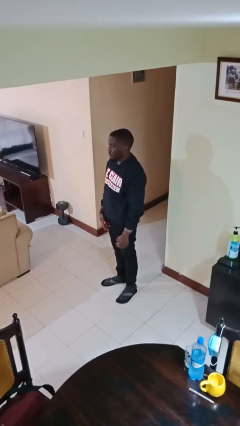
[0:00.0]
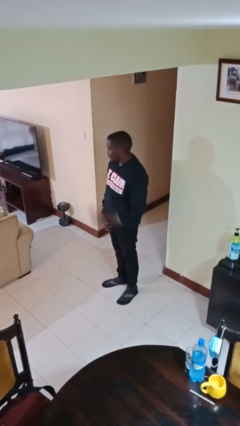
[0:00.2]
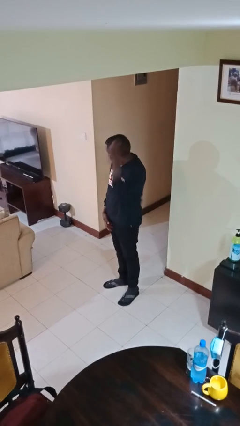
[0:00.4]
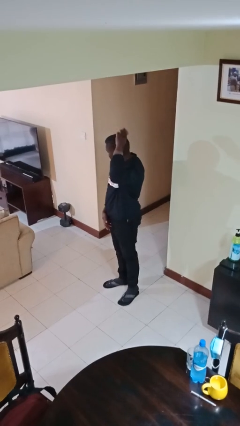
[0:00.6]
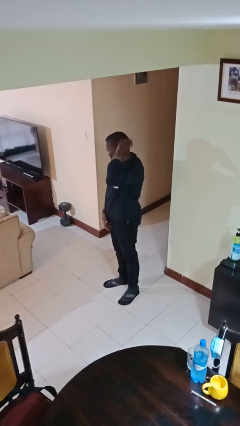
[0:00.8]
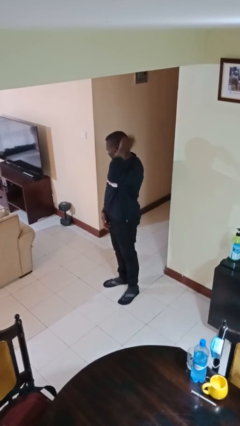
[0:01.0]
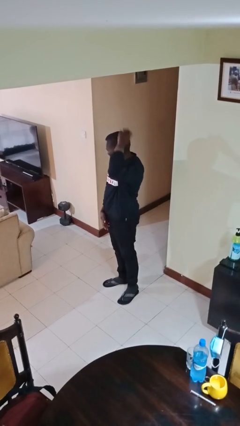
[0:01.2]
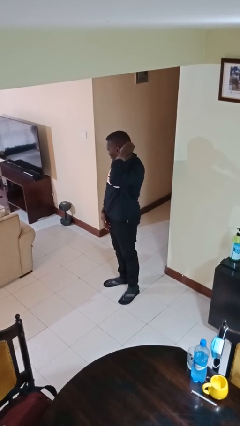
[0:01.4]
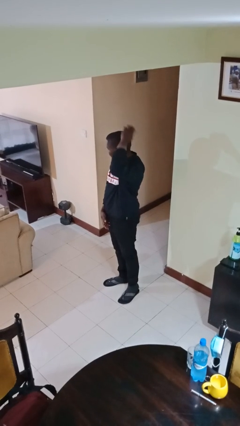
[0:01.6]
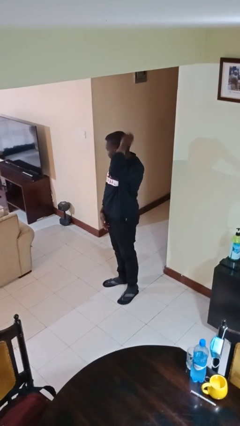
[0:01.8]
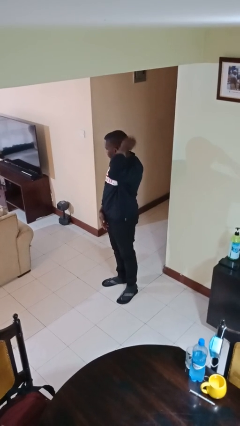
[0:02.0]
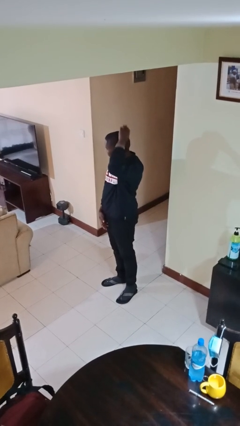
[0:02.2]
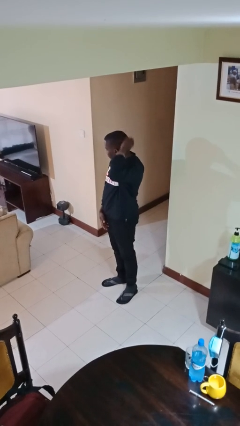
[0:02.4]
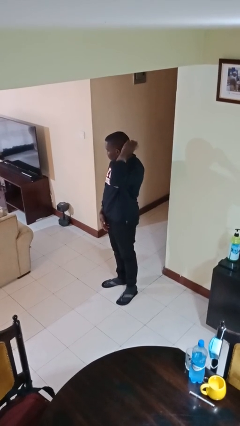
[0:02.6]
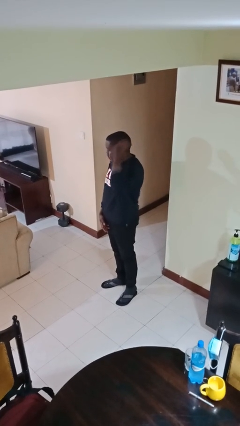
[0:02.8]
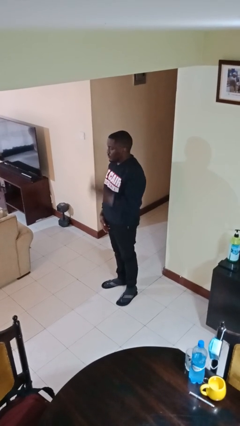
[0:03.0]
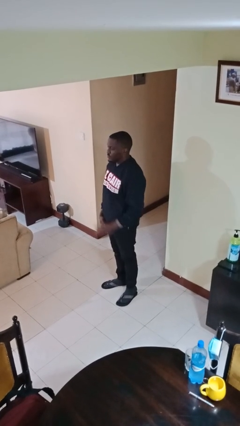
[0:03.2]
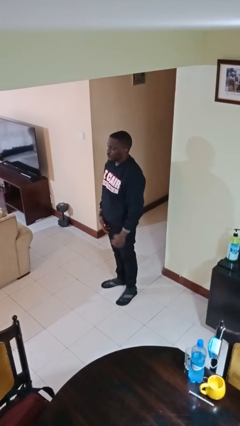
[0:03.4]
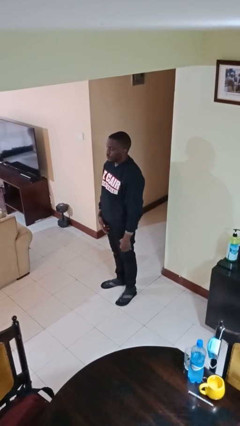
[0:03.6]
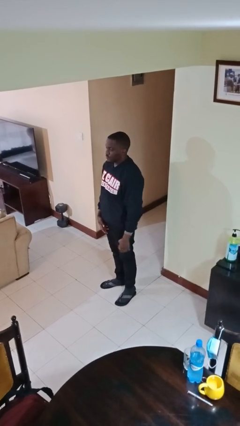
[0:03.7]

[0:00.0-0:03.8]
person brushes hair

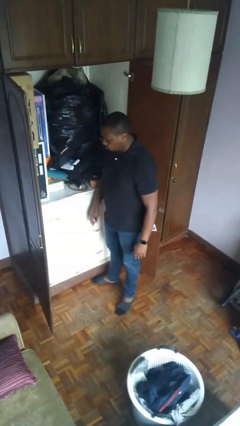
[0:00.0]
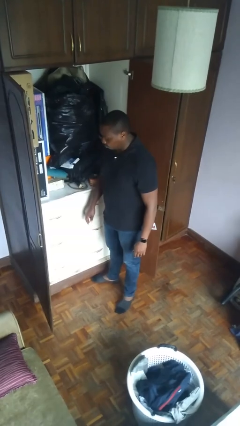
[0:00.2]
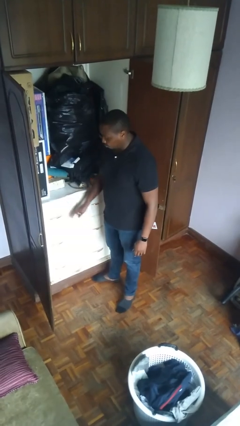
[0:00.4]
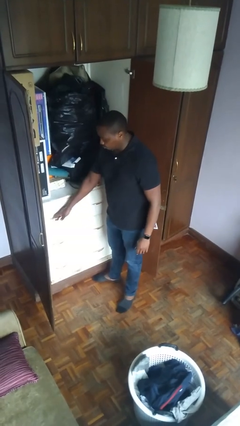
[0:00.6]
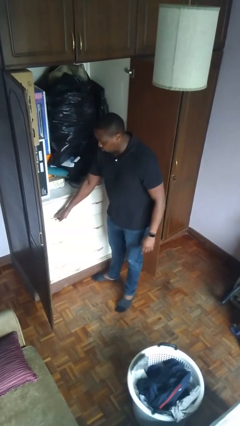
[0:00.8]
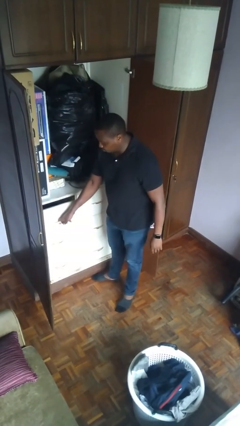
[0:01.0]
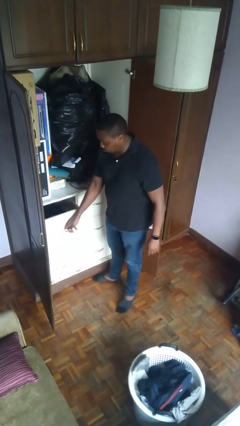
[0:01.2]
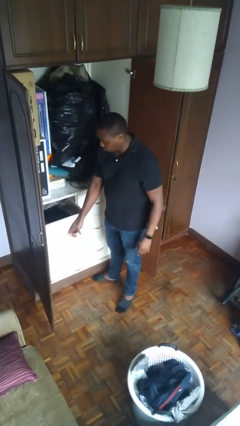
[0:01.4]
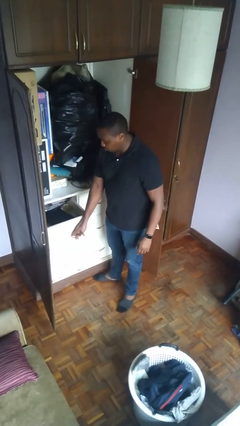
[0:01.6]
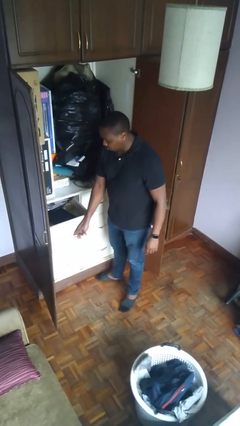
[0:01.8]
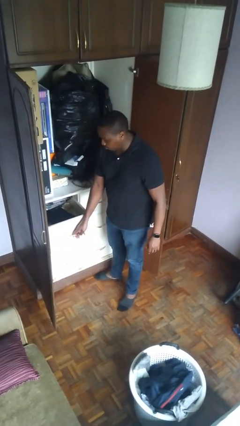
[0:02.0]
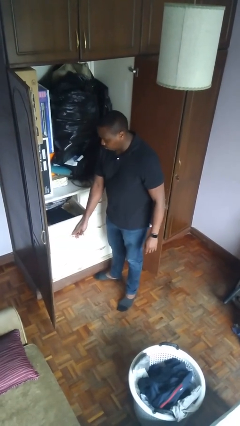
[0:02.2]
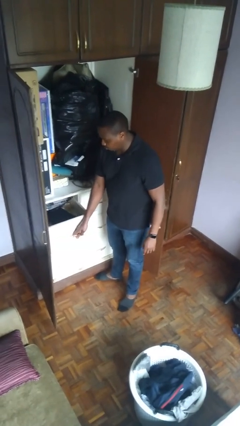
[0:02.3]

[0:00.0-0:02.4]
person opens dresser drawer

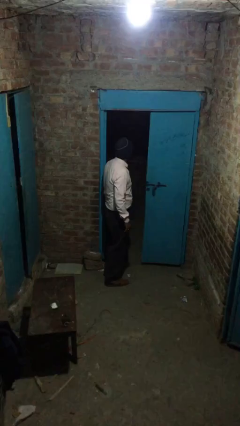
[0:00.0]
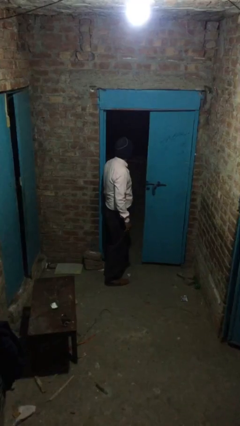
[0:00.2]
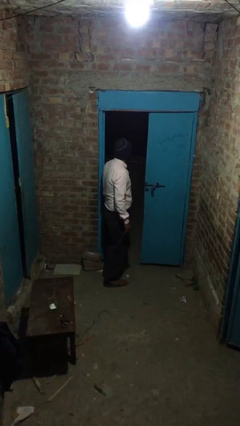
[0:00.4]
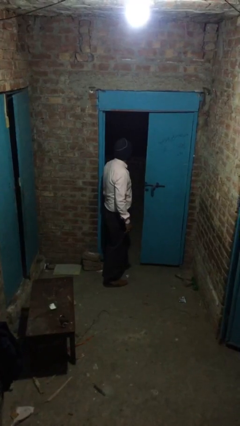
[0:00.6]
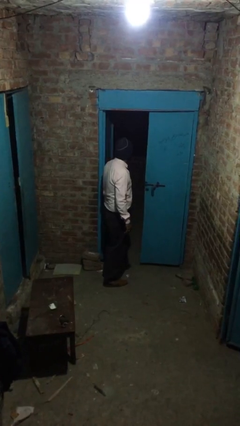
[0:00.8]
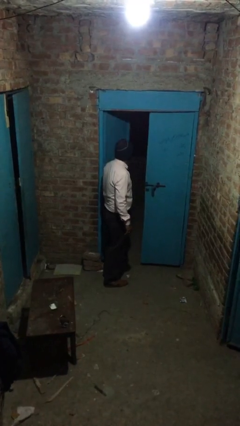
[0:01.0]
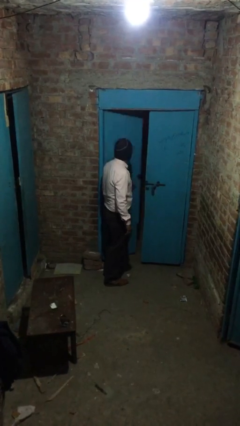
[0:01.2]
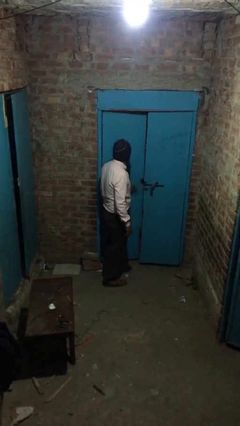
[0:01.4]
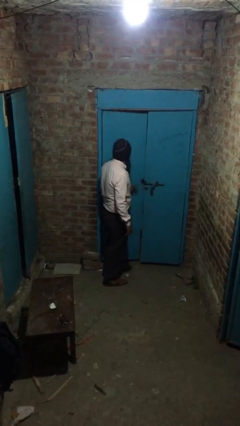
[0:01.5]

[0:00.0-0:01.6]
person closes facility door

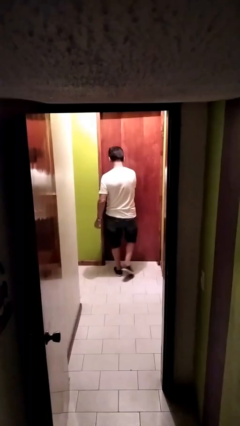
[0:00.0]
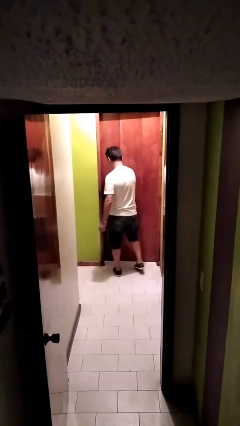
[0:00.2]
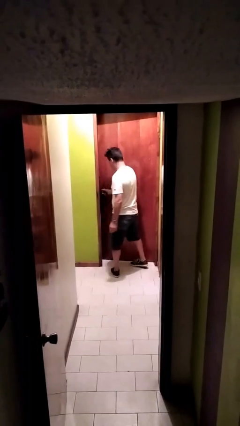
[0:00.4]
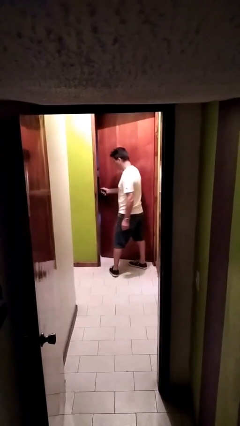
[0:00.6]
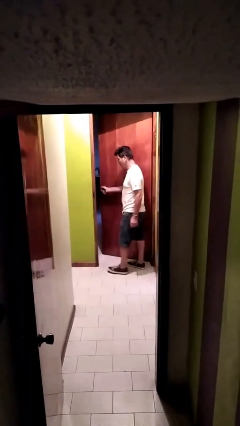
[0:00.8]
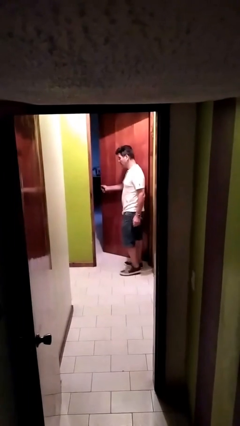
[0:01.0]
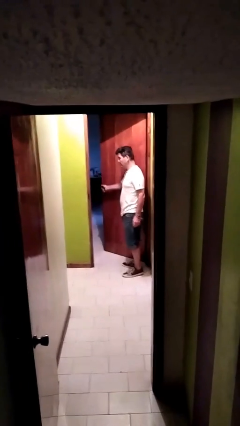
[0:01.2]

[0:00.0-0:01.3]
person opens facility door

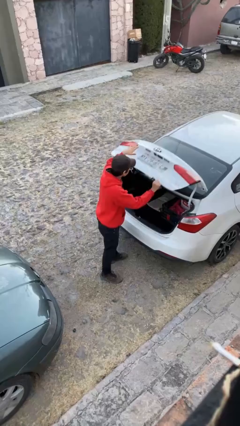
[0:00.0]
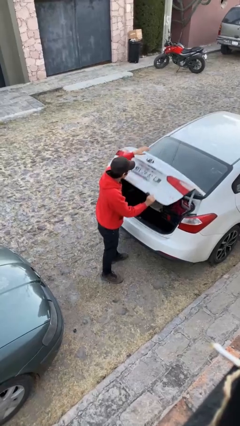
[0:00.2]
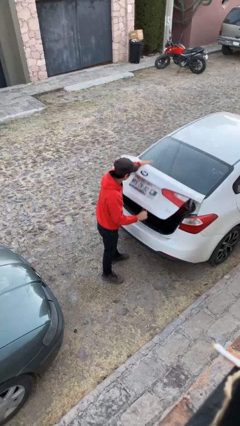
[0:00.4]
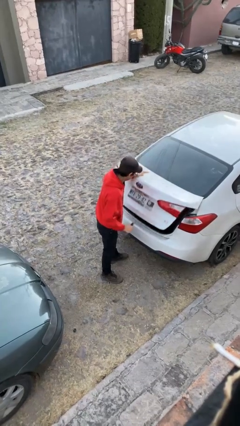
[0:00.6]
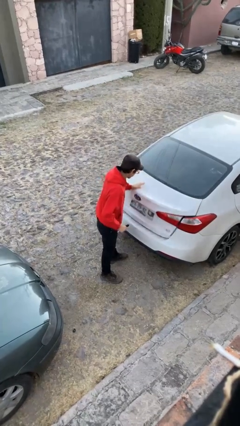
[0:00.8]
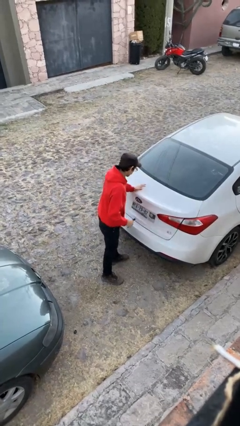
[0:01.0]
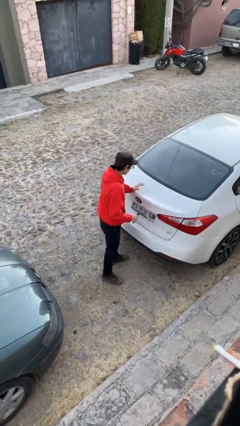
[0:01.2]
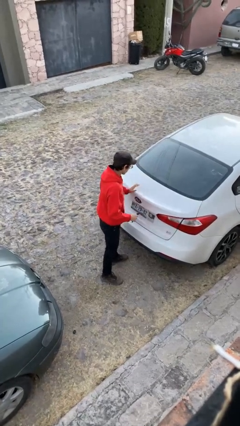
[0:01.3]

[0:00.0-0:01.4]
person closes car trunk

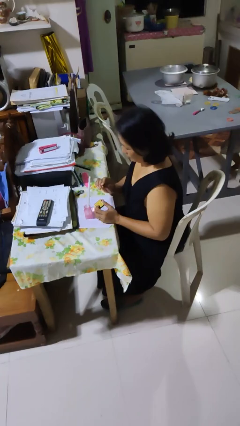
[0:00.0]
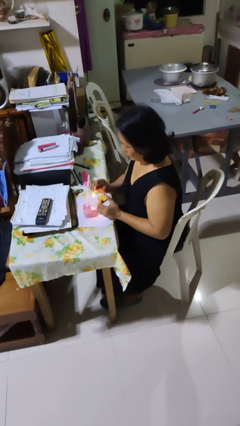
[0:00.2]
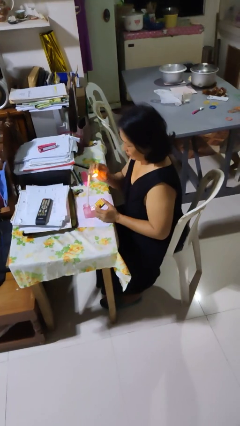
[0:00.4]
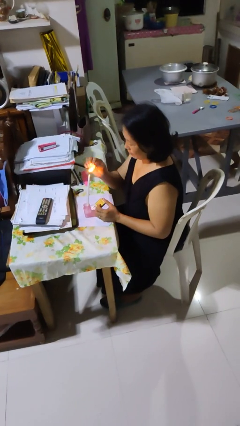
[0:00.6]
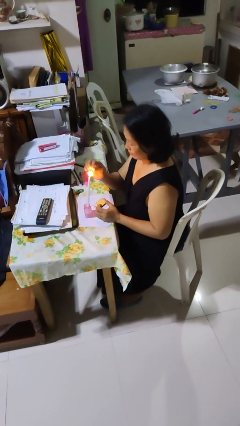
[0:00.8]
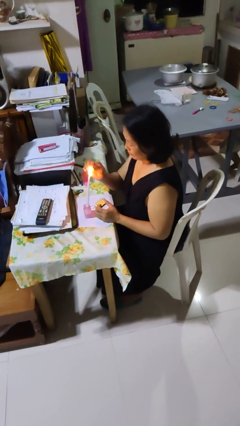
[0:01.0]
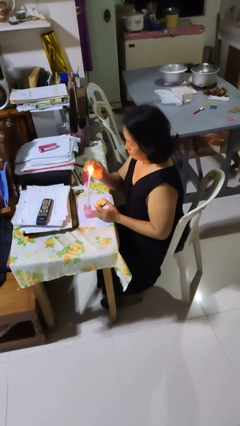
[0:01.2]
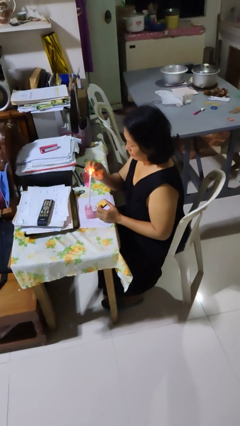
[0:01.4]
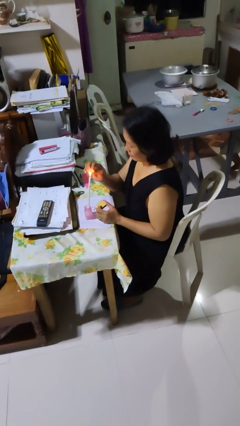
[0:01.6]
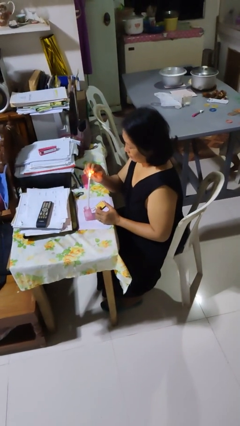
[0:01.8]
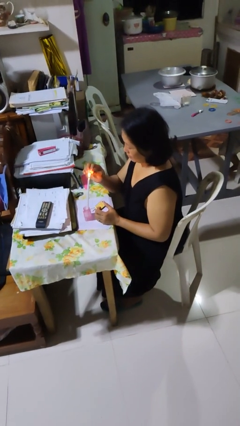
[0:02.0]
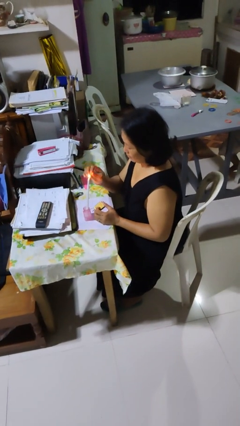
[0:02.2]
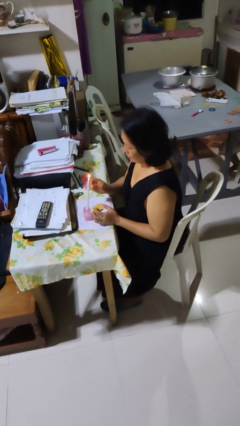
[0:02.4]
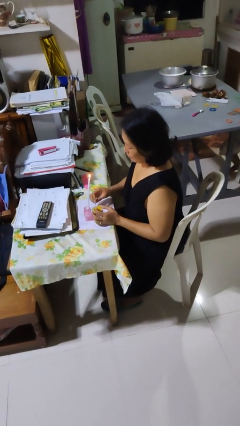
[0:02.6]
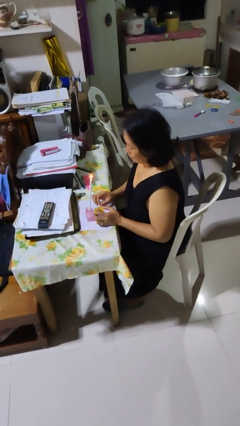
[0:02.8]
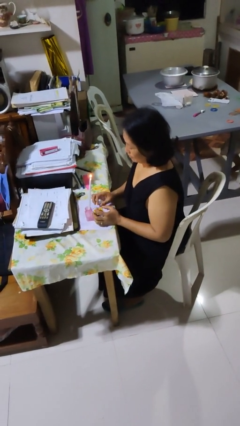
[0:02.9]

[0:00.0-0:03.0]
person lights candle

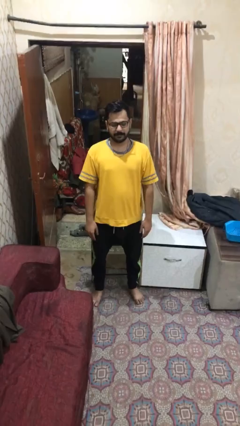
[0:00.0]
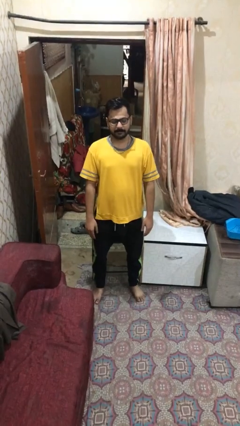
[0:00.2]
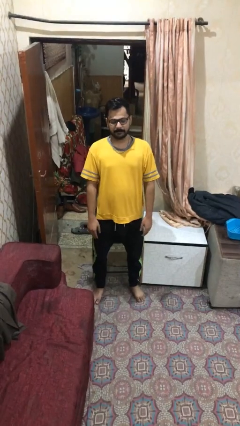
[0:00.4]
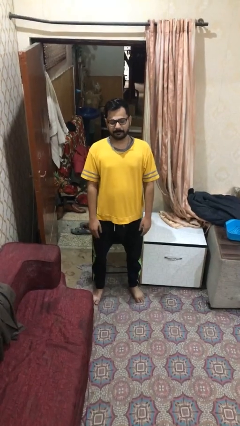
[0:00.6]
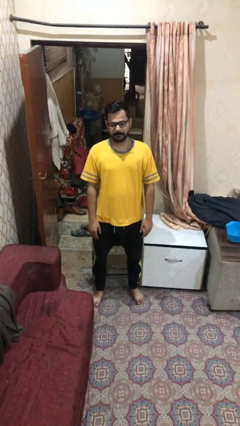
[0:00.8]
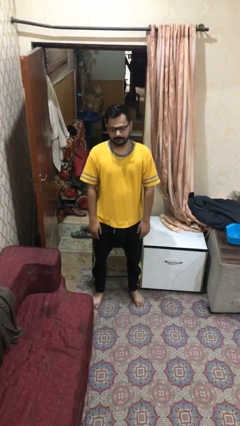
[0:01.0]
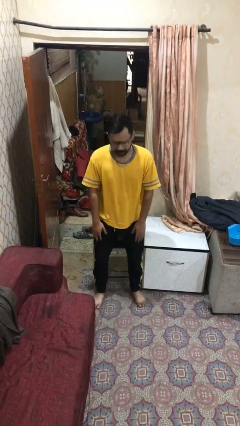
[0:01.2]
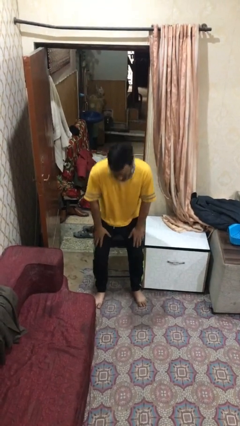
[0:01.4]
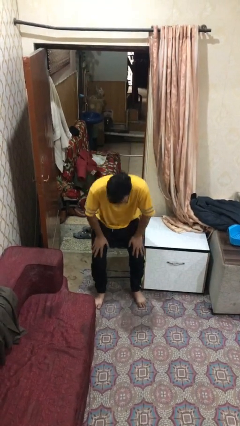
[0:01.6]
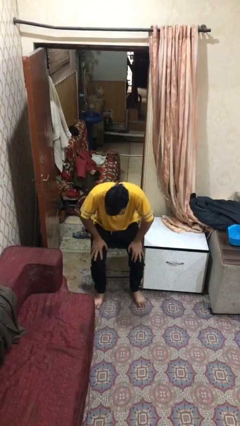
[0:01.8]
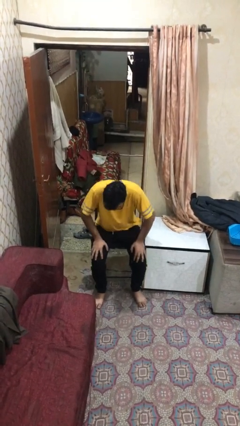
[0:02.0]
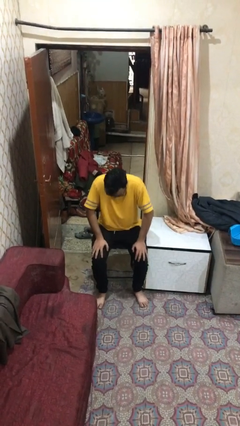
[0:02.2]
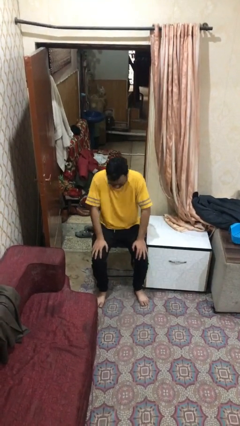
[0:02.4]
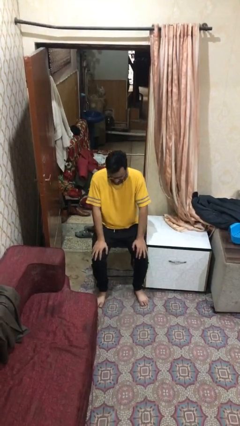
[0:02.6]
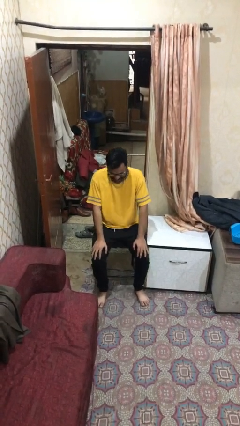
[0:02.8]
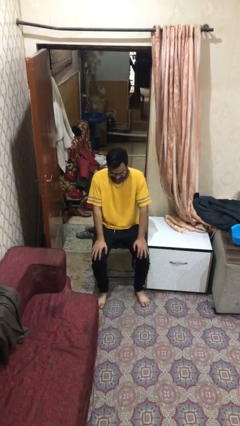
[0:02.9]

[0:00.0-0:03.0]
person sits down

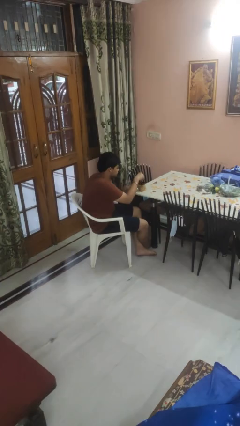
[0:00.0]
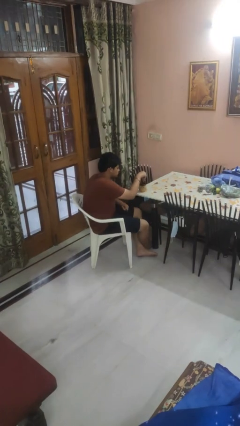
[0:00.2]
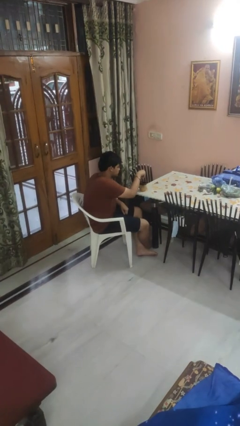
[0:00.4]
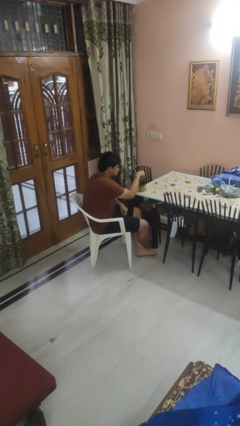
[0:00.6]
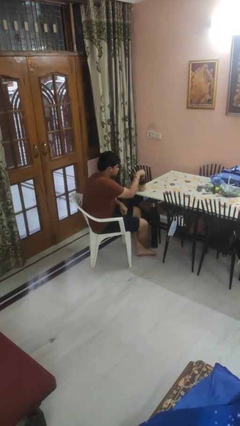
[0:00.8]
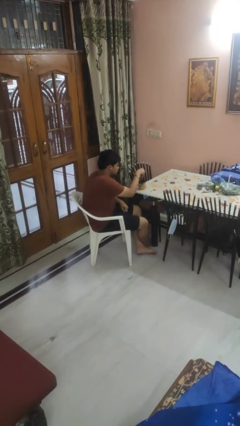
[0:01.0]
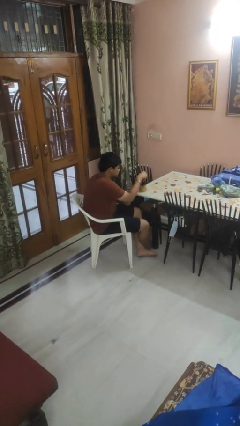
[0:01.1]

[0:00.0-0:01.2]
person stirs mug
